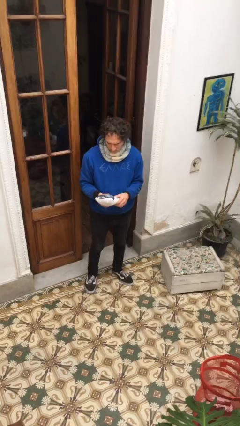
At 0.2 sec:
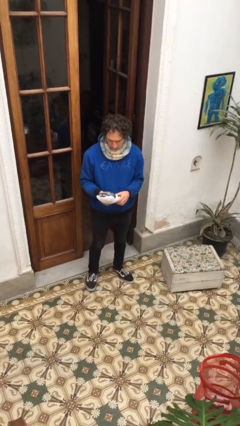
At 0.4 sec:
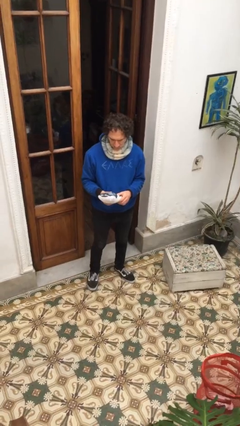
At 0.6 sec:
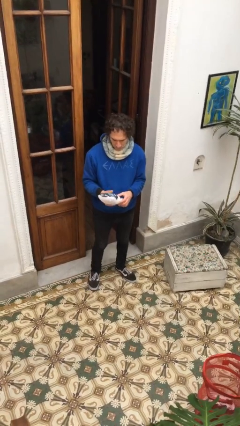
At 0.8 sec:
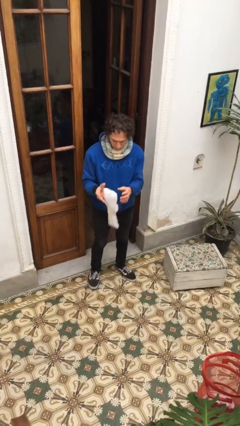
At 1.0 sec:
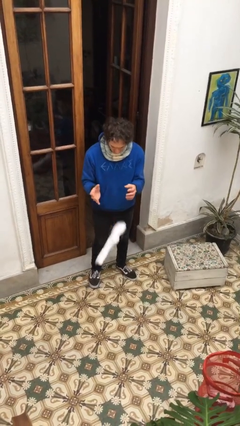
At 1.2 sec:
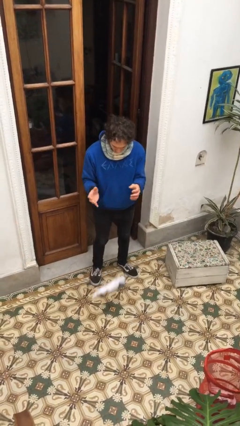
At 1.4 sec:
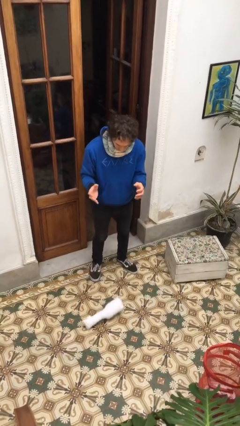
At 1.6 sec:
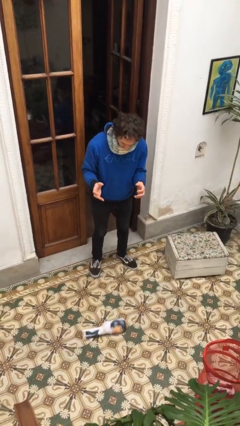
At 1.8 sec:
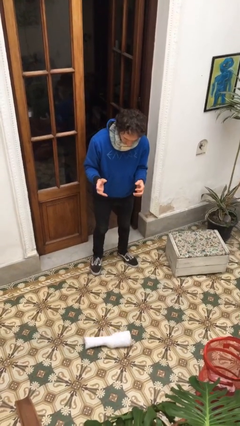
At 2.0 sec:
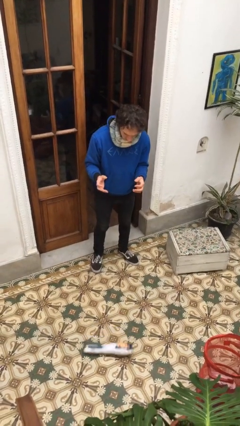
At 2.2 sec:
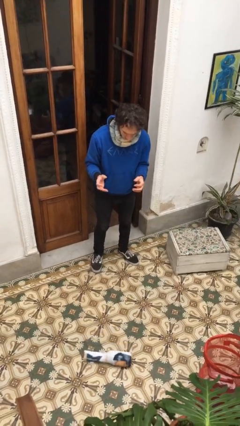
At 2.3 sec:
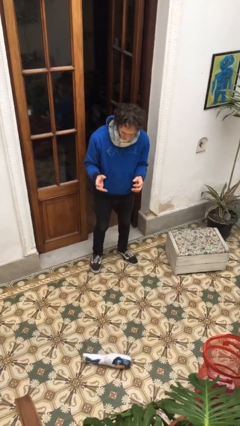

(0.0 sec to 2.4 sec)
person drops object

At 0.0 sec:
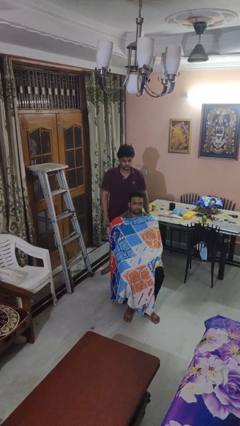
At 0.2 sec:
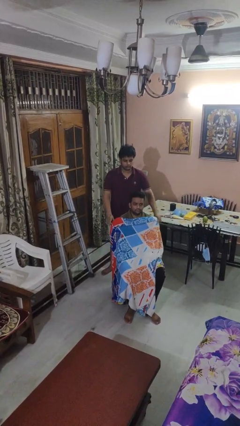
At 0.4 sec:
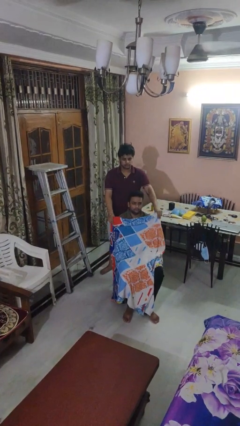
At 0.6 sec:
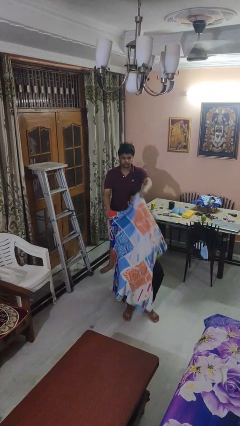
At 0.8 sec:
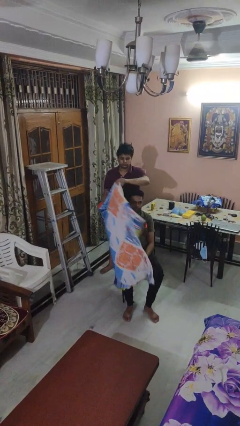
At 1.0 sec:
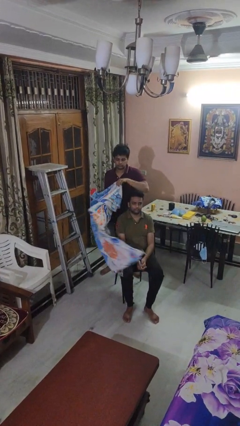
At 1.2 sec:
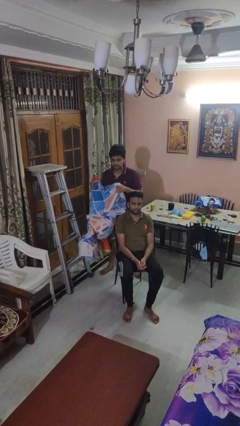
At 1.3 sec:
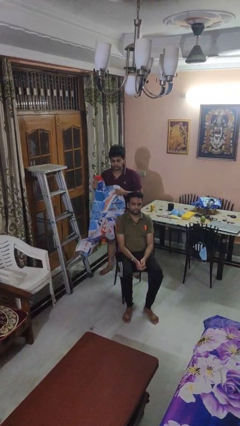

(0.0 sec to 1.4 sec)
person uncovers friend with blanket

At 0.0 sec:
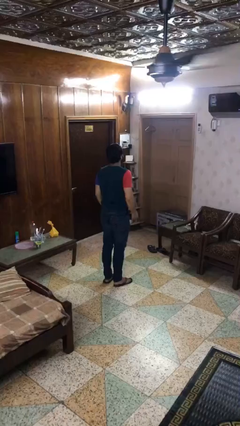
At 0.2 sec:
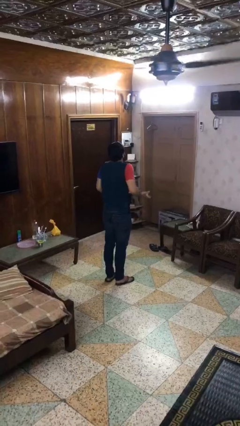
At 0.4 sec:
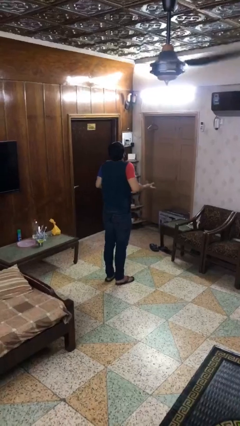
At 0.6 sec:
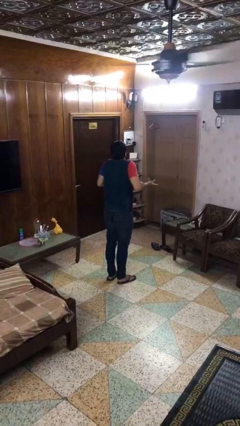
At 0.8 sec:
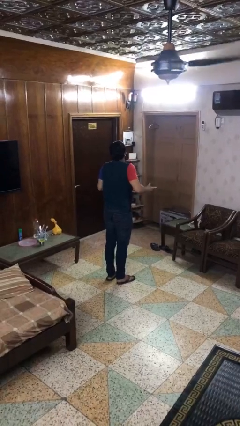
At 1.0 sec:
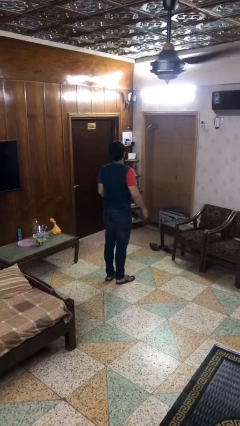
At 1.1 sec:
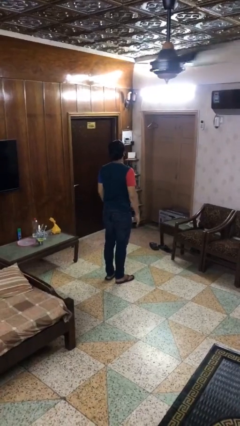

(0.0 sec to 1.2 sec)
person shrugs

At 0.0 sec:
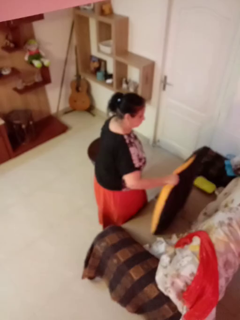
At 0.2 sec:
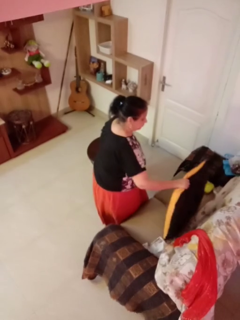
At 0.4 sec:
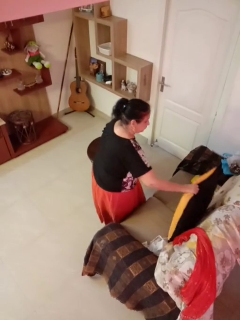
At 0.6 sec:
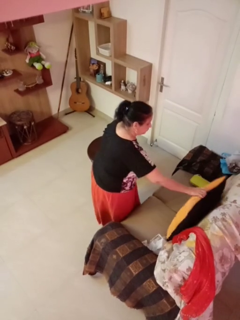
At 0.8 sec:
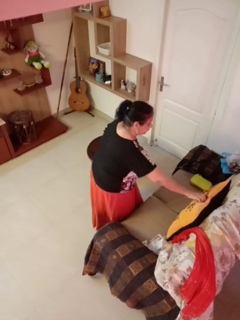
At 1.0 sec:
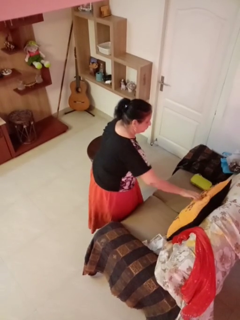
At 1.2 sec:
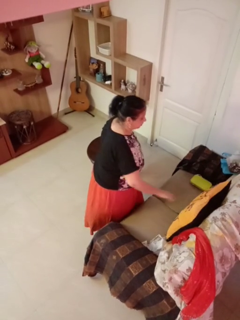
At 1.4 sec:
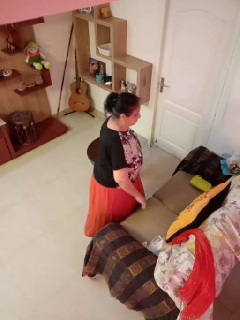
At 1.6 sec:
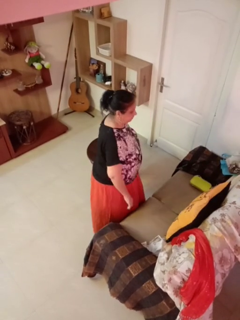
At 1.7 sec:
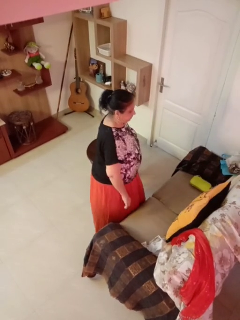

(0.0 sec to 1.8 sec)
person puts down object on couch

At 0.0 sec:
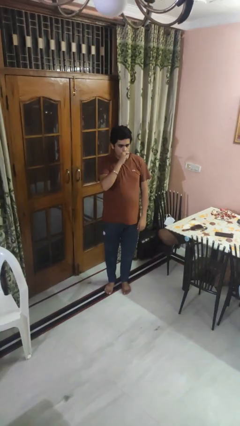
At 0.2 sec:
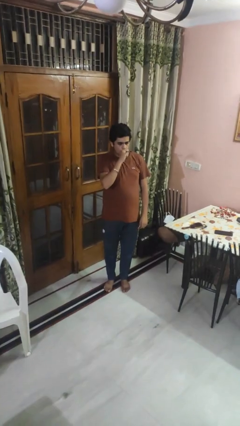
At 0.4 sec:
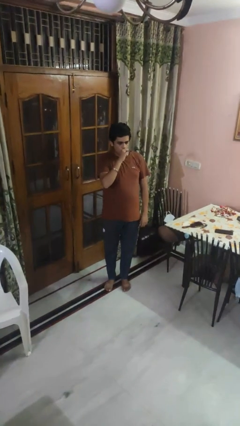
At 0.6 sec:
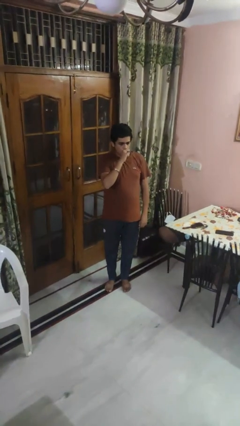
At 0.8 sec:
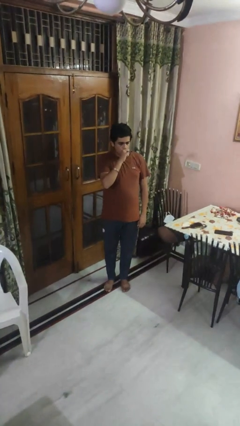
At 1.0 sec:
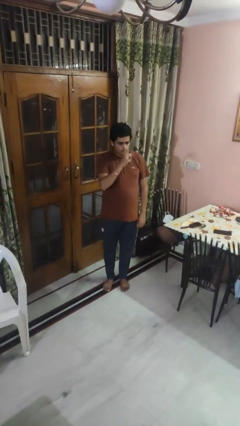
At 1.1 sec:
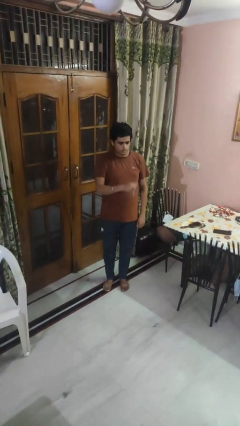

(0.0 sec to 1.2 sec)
person vapes

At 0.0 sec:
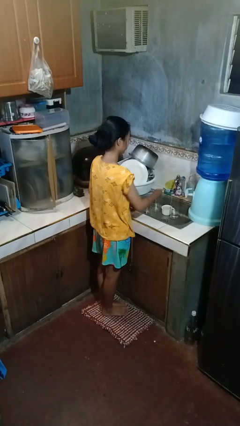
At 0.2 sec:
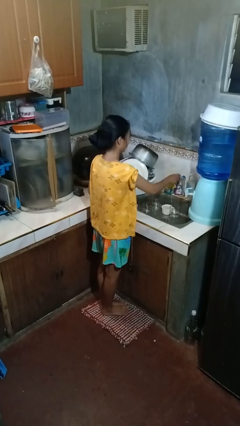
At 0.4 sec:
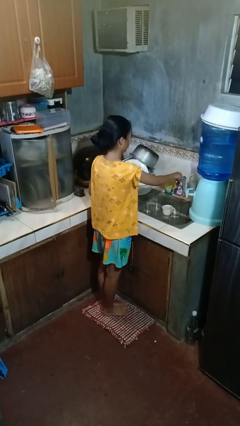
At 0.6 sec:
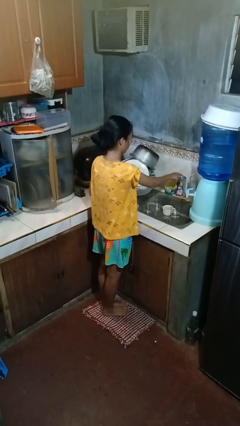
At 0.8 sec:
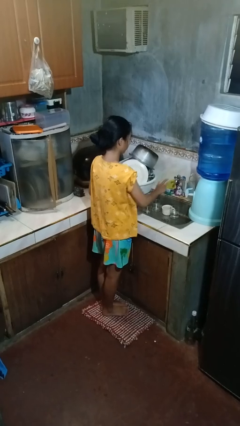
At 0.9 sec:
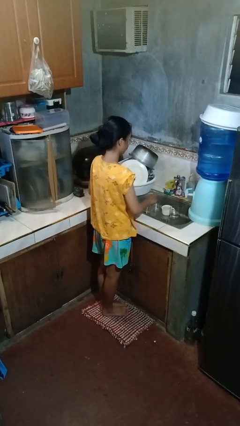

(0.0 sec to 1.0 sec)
person turns off faucet

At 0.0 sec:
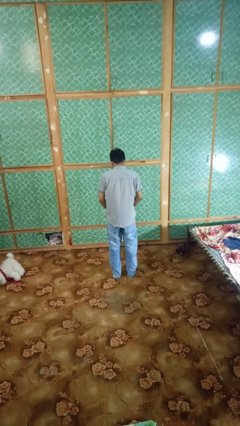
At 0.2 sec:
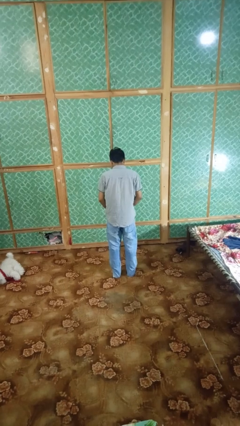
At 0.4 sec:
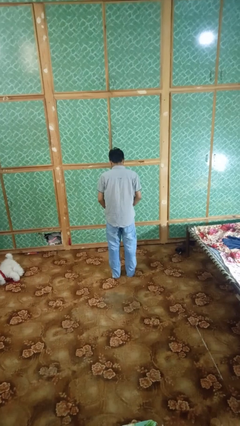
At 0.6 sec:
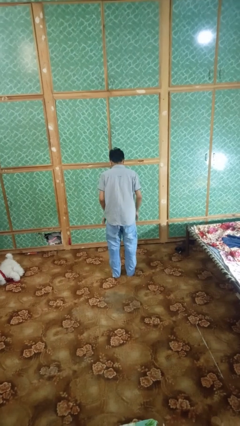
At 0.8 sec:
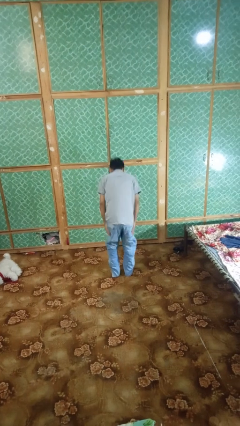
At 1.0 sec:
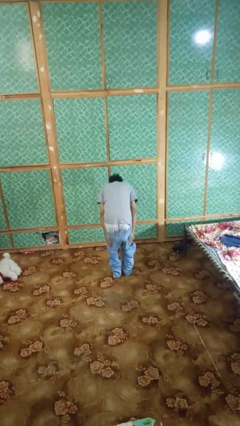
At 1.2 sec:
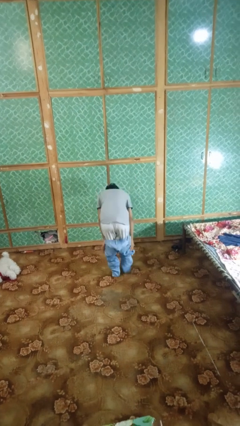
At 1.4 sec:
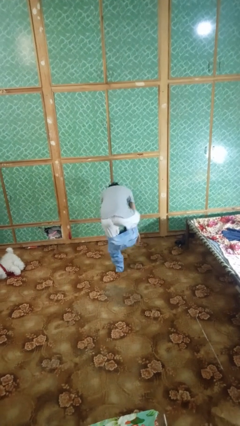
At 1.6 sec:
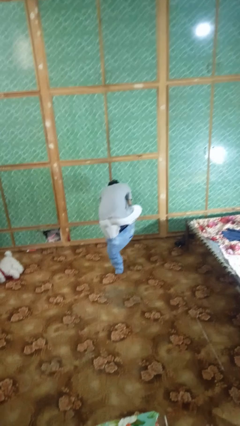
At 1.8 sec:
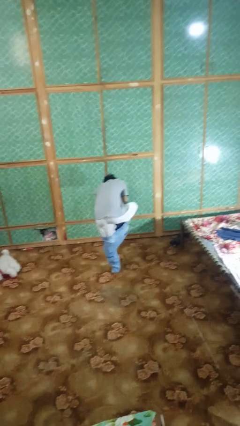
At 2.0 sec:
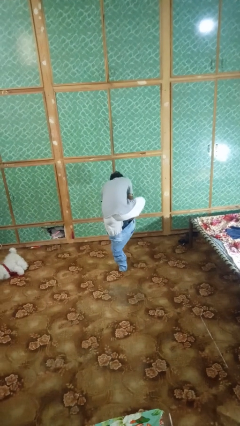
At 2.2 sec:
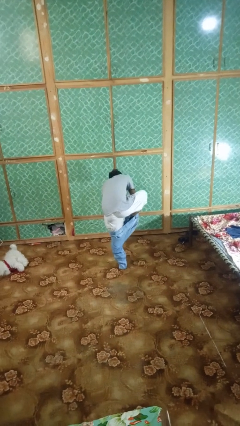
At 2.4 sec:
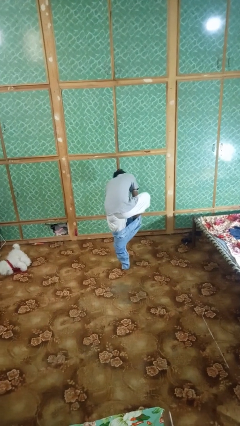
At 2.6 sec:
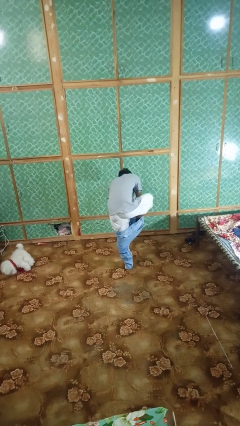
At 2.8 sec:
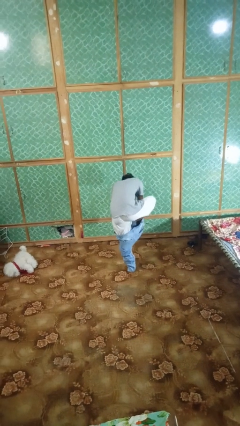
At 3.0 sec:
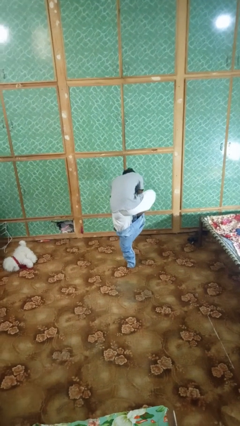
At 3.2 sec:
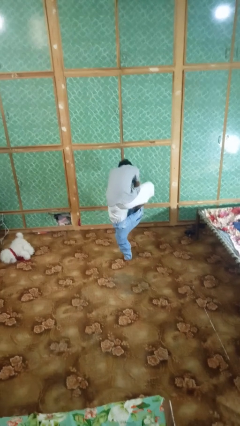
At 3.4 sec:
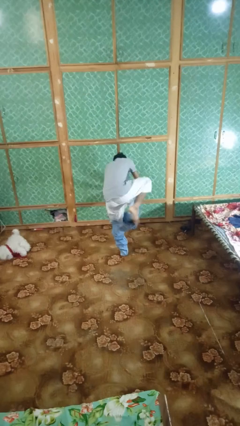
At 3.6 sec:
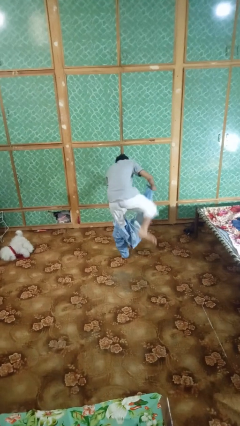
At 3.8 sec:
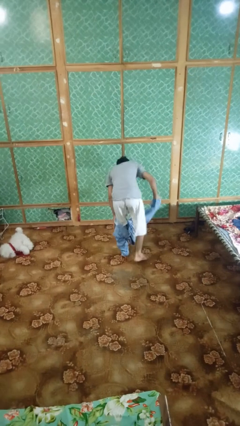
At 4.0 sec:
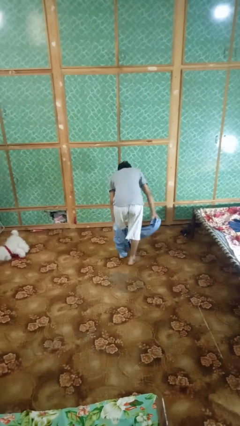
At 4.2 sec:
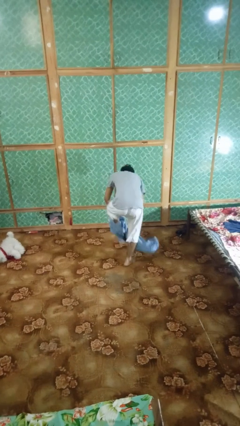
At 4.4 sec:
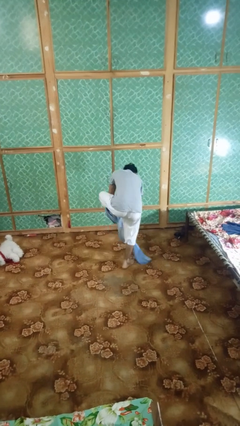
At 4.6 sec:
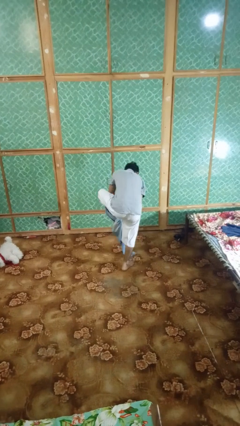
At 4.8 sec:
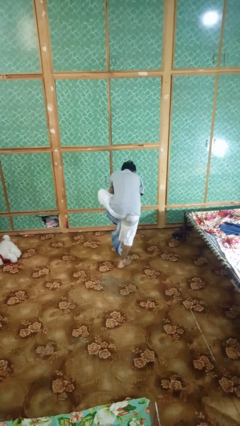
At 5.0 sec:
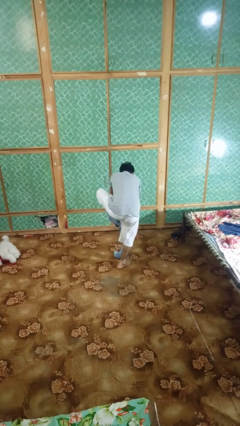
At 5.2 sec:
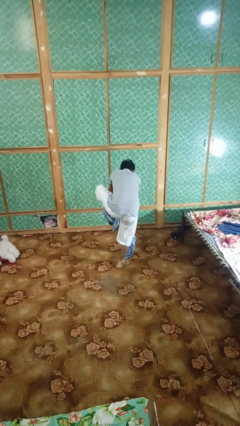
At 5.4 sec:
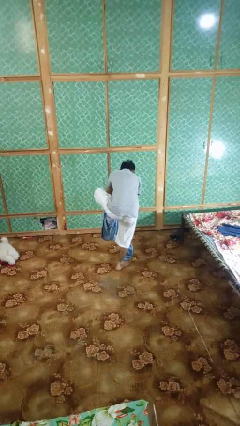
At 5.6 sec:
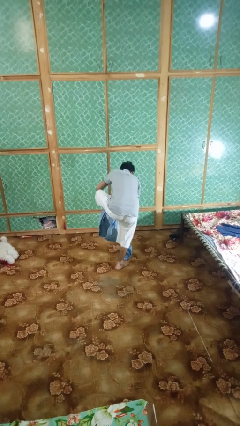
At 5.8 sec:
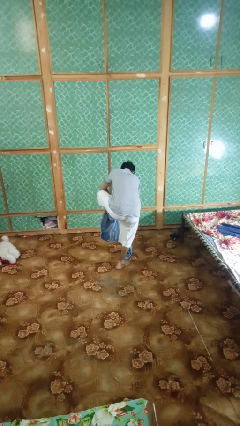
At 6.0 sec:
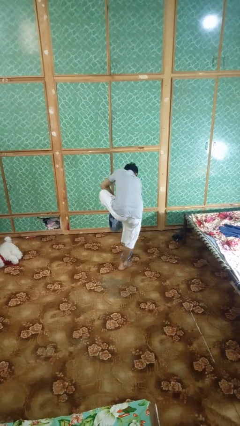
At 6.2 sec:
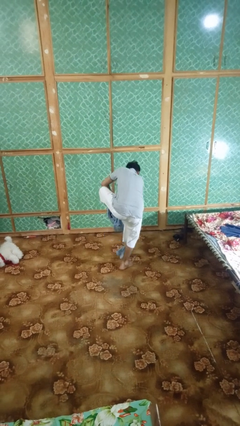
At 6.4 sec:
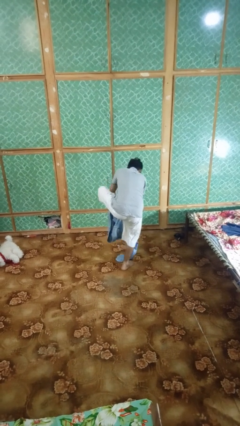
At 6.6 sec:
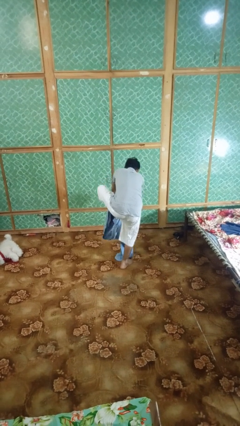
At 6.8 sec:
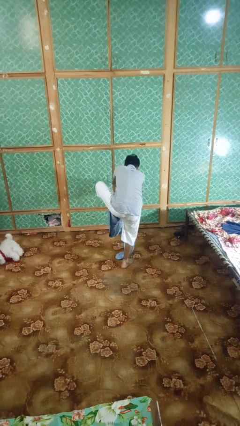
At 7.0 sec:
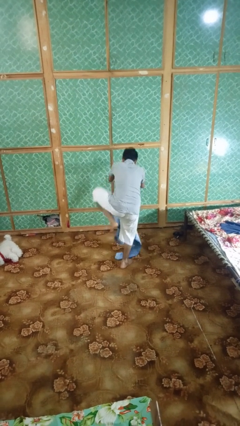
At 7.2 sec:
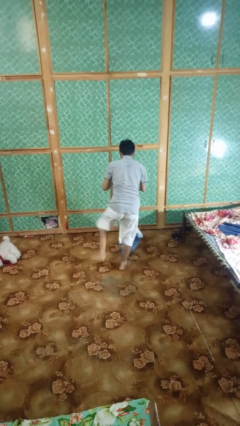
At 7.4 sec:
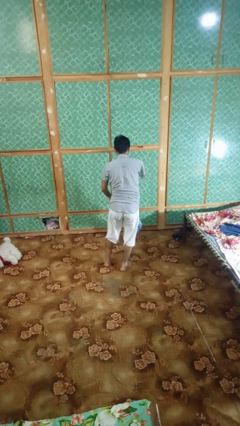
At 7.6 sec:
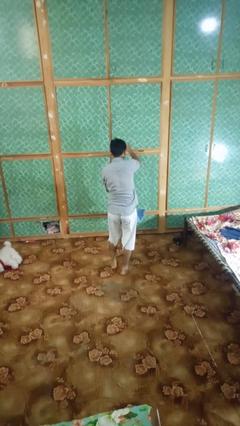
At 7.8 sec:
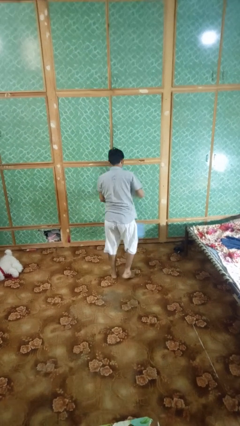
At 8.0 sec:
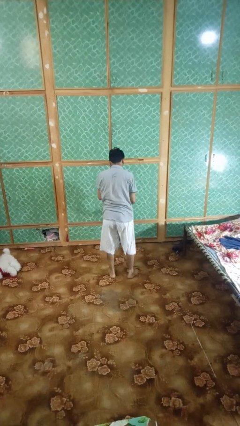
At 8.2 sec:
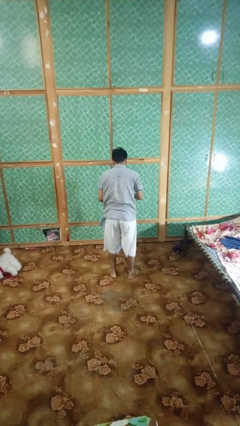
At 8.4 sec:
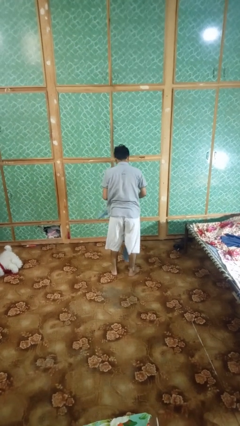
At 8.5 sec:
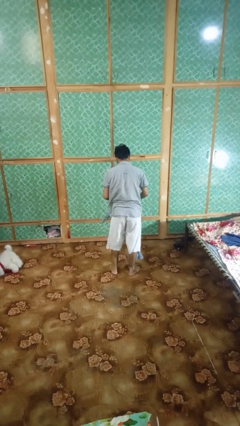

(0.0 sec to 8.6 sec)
person takes off pants
